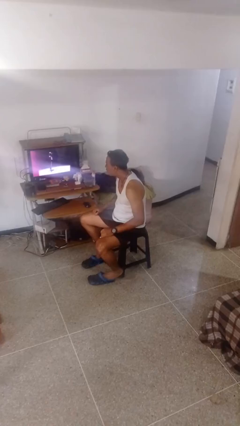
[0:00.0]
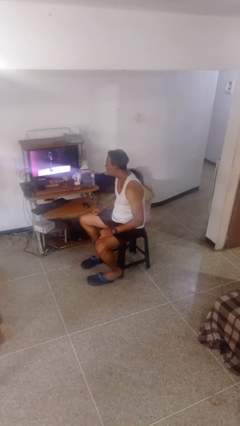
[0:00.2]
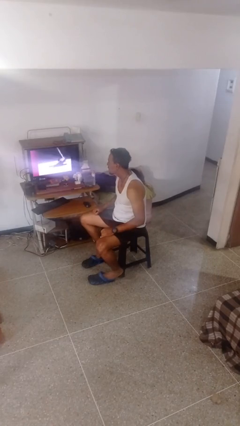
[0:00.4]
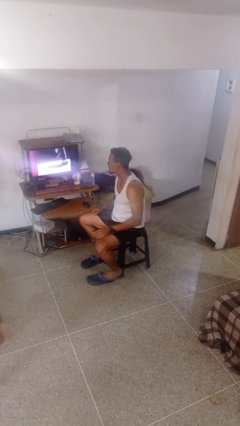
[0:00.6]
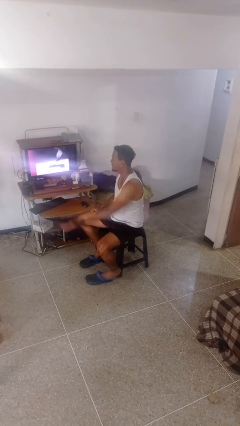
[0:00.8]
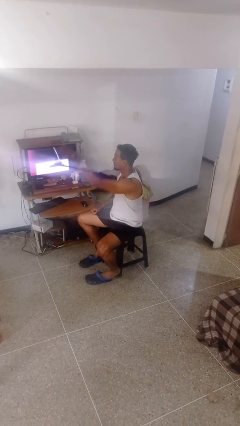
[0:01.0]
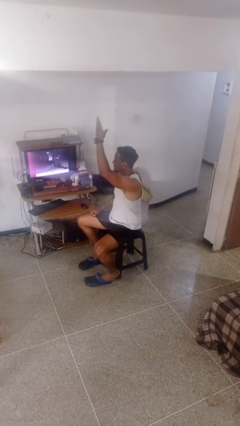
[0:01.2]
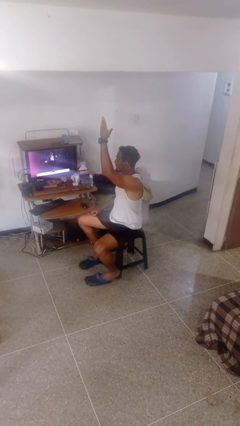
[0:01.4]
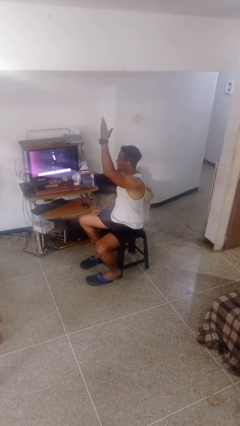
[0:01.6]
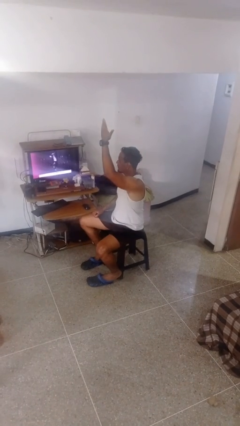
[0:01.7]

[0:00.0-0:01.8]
person gestures swipe up

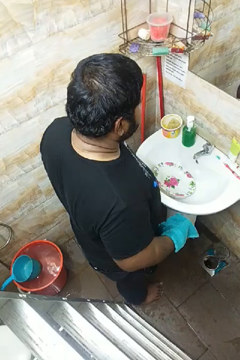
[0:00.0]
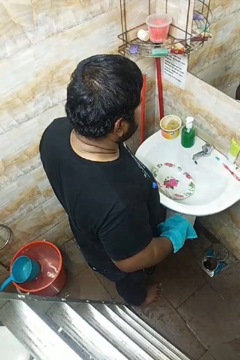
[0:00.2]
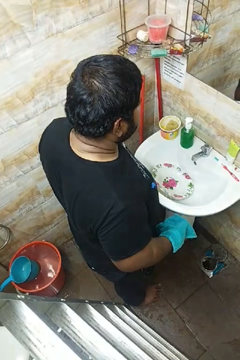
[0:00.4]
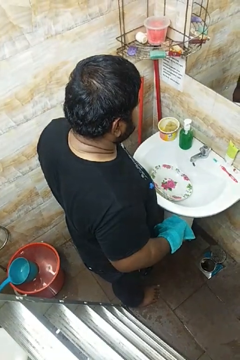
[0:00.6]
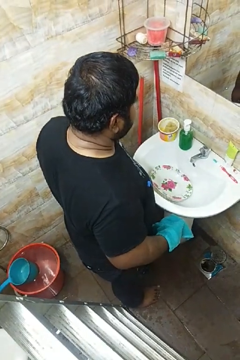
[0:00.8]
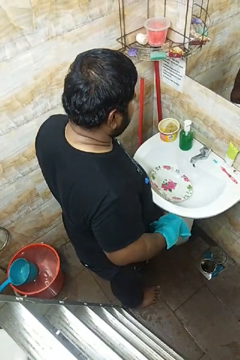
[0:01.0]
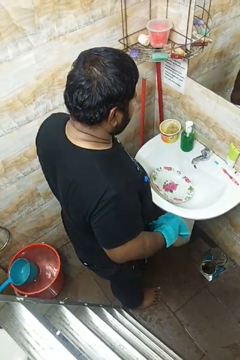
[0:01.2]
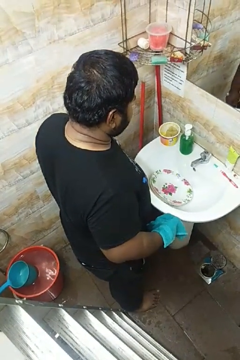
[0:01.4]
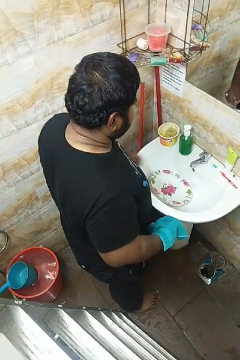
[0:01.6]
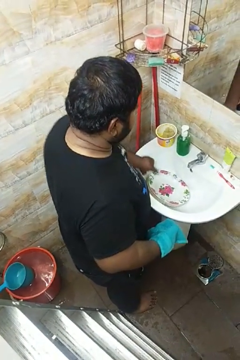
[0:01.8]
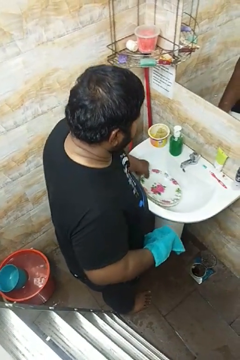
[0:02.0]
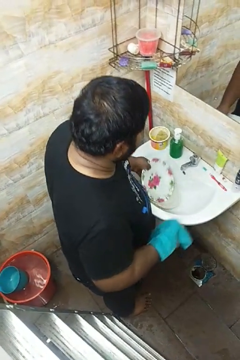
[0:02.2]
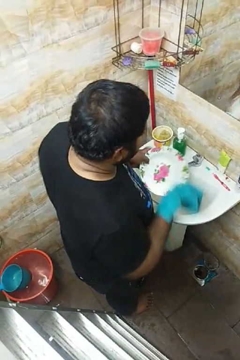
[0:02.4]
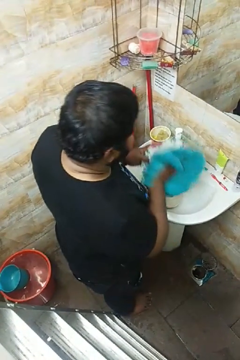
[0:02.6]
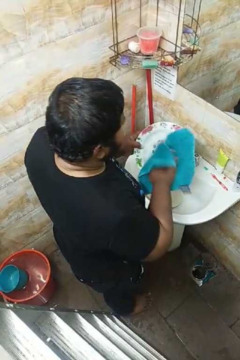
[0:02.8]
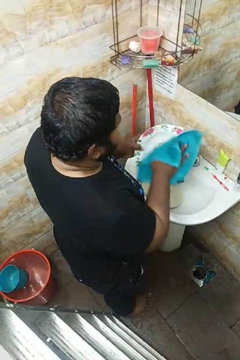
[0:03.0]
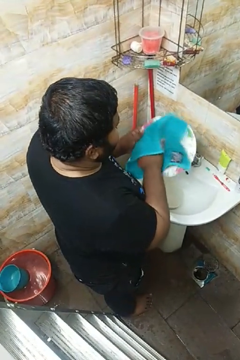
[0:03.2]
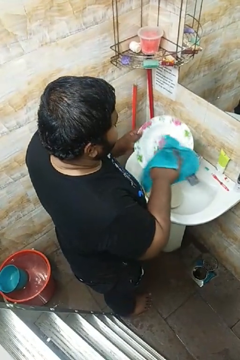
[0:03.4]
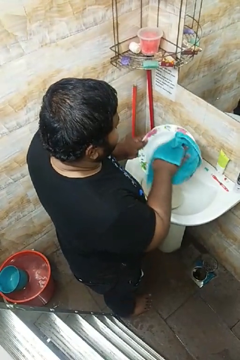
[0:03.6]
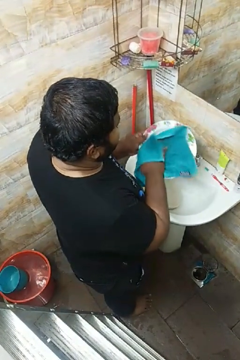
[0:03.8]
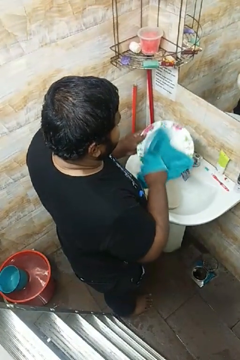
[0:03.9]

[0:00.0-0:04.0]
person dries dish

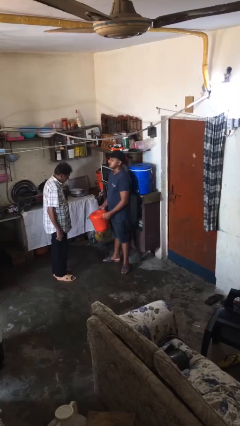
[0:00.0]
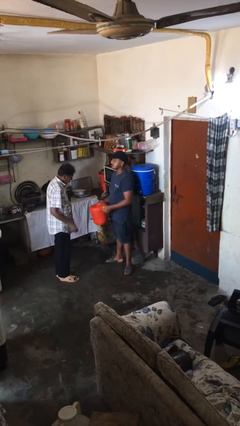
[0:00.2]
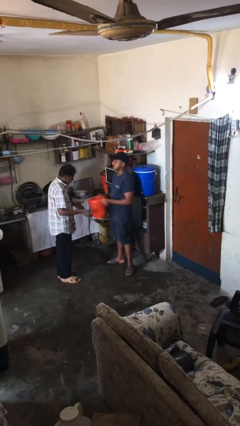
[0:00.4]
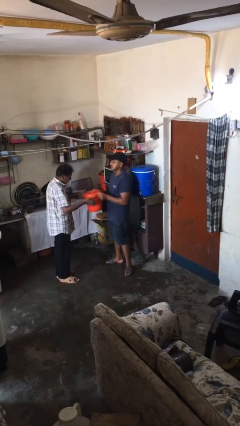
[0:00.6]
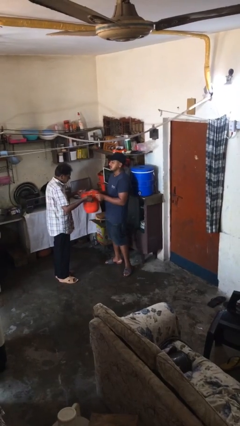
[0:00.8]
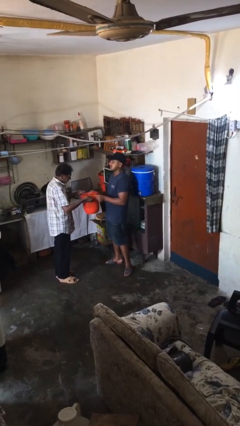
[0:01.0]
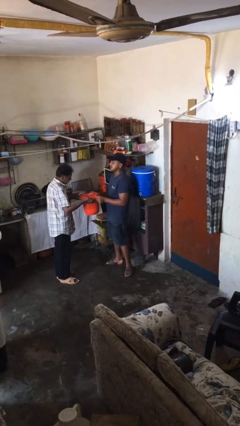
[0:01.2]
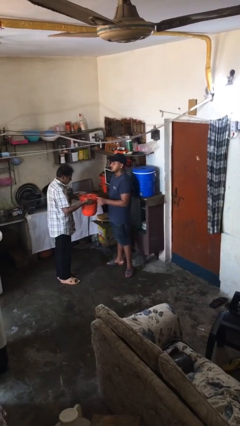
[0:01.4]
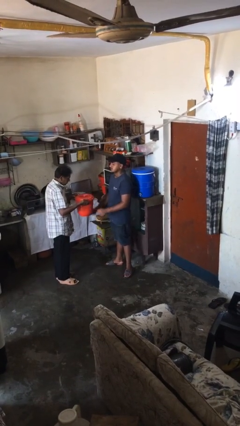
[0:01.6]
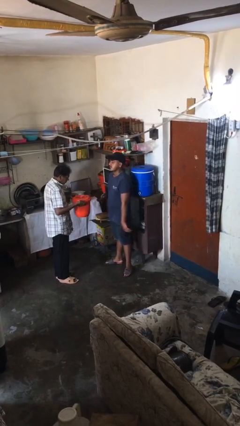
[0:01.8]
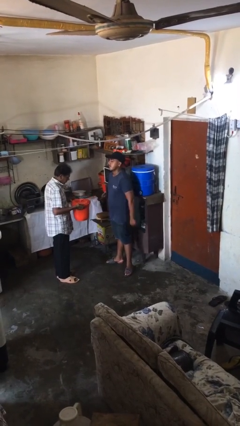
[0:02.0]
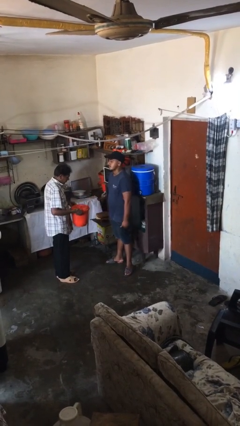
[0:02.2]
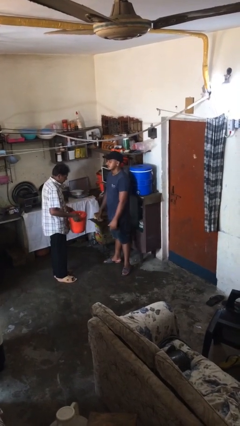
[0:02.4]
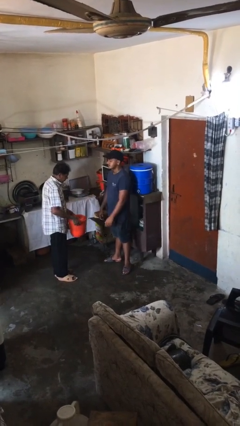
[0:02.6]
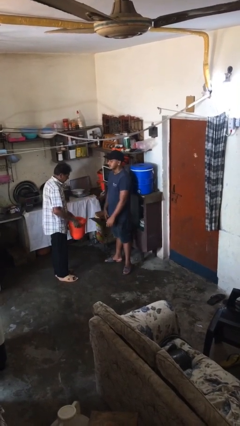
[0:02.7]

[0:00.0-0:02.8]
person transfers object to person

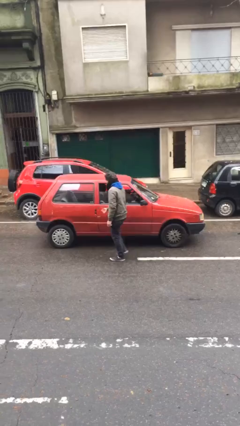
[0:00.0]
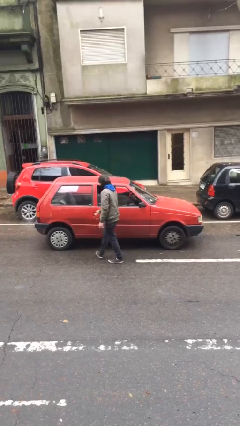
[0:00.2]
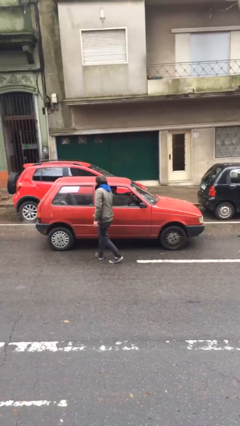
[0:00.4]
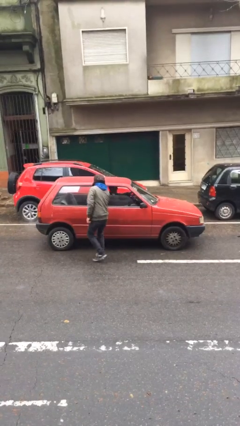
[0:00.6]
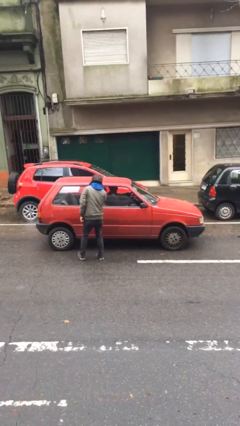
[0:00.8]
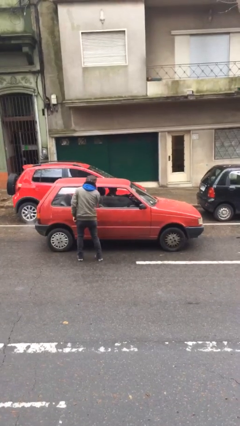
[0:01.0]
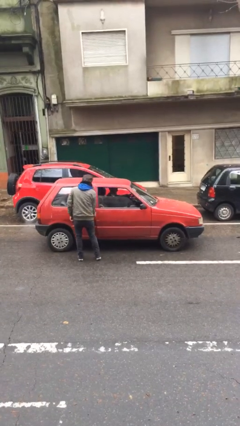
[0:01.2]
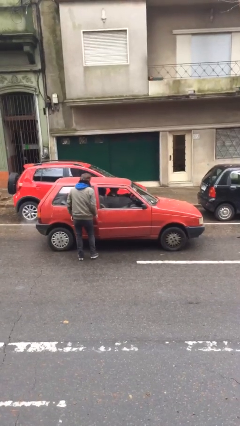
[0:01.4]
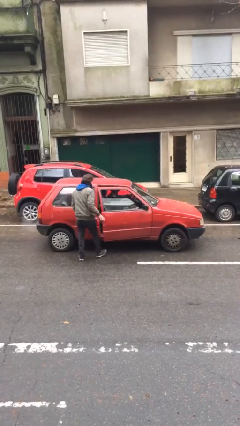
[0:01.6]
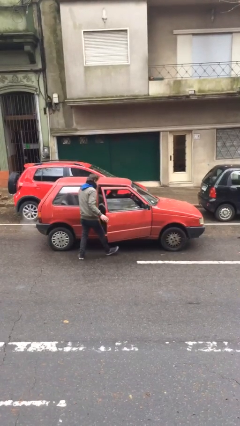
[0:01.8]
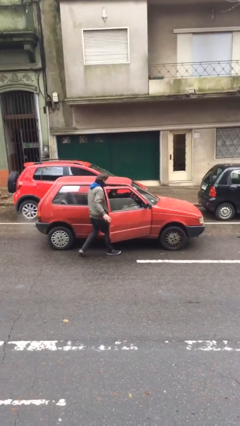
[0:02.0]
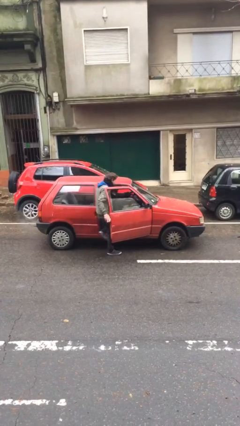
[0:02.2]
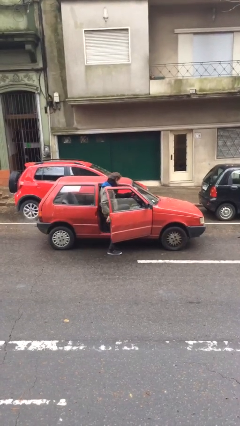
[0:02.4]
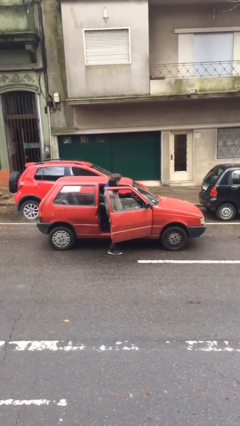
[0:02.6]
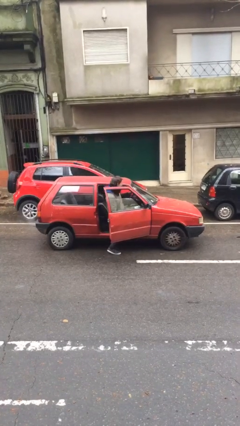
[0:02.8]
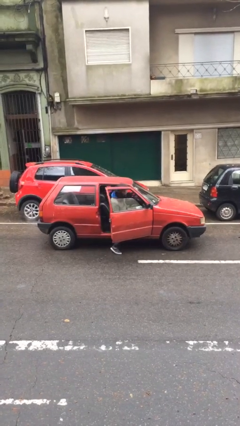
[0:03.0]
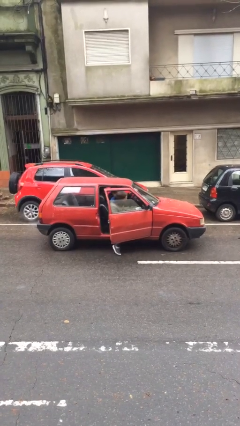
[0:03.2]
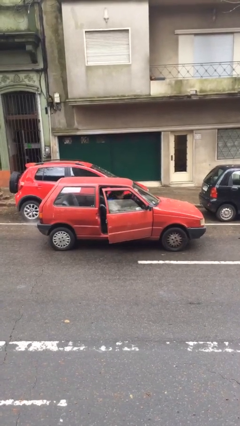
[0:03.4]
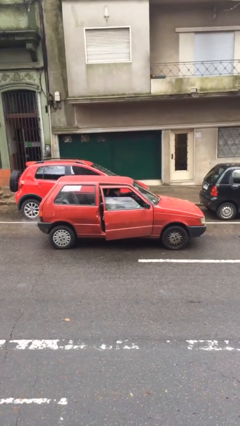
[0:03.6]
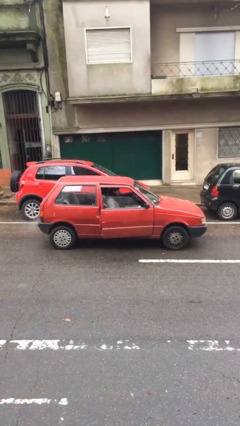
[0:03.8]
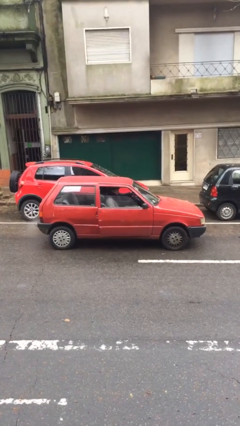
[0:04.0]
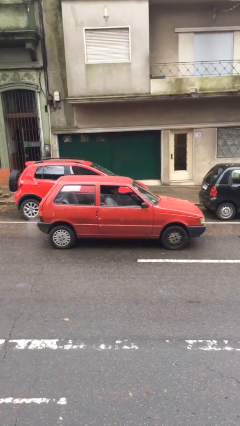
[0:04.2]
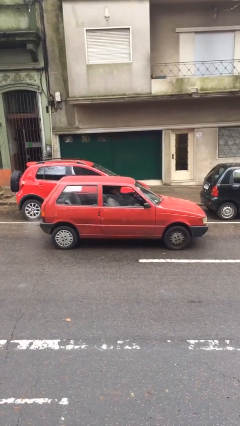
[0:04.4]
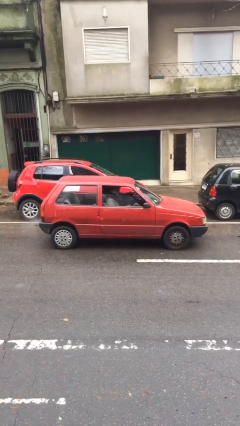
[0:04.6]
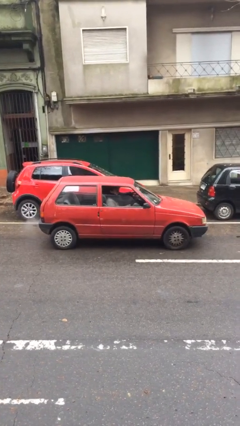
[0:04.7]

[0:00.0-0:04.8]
car picks up person

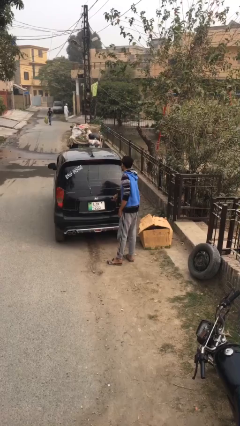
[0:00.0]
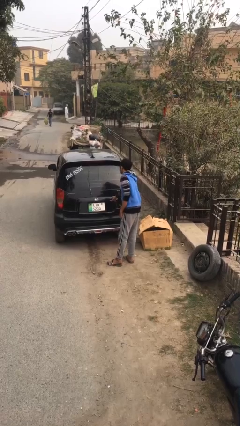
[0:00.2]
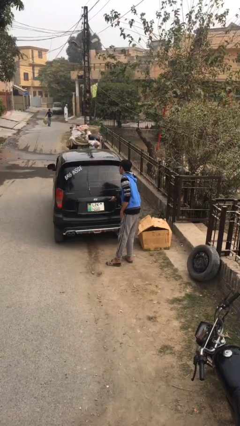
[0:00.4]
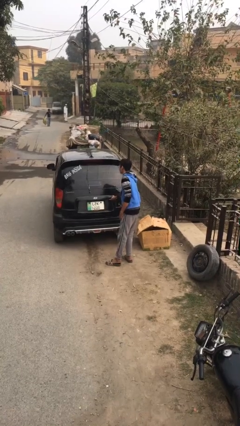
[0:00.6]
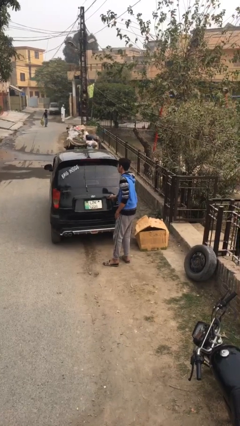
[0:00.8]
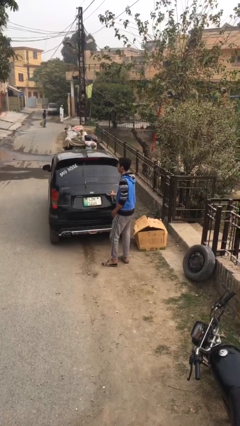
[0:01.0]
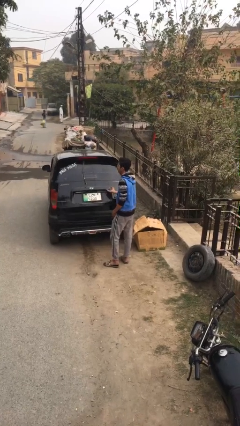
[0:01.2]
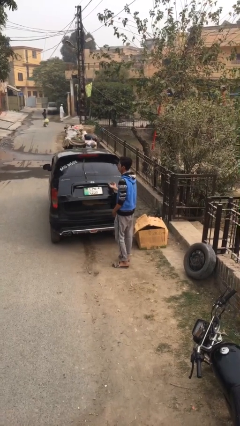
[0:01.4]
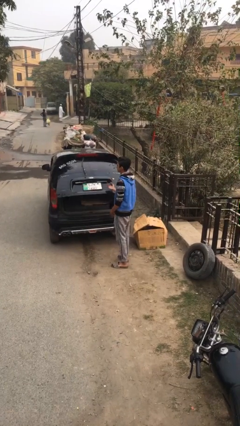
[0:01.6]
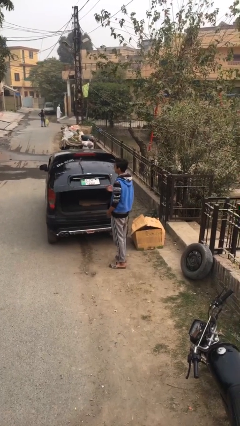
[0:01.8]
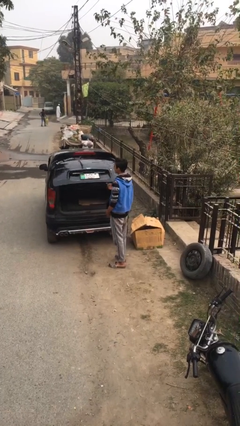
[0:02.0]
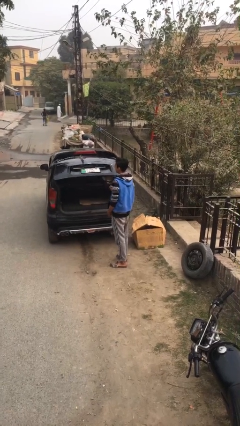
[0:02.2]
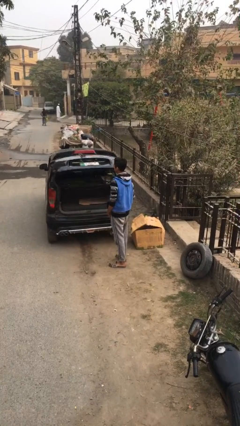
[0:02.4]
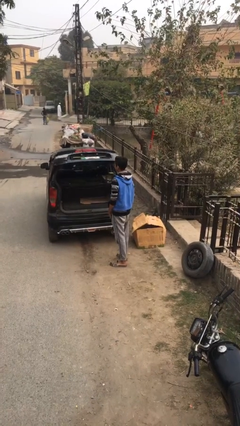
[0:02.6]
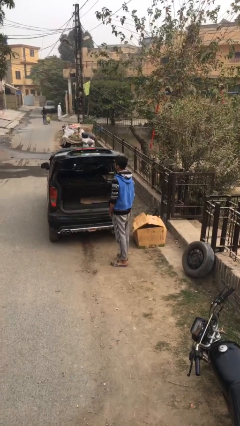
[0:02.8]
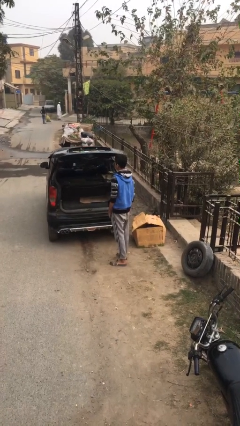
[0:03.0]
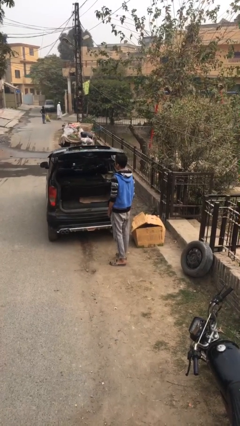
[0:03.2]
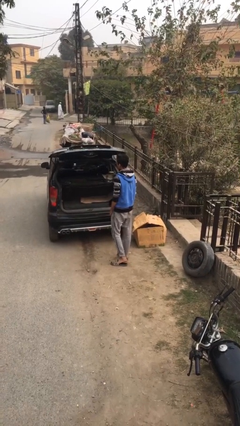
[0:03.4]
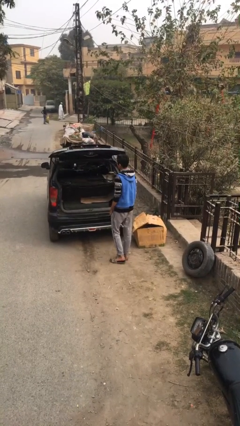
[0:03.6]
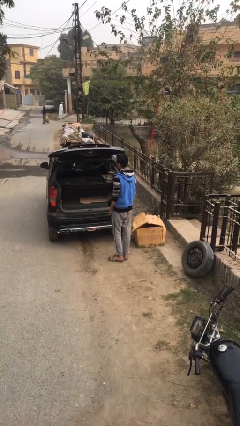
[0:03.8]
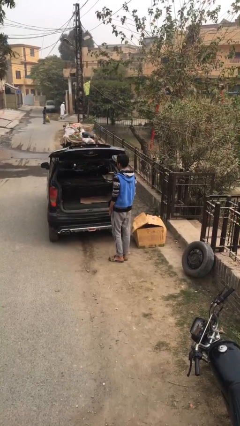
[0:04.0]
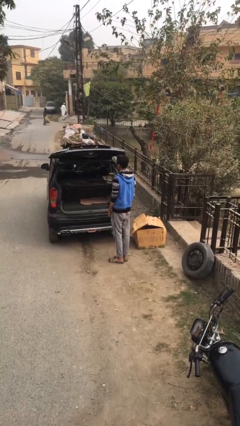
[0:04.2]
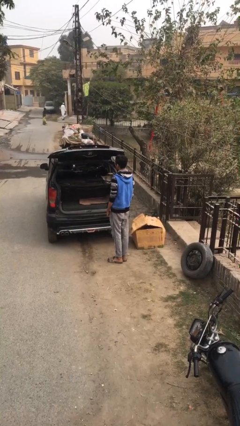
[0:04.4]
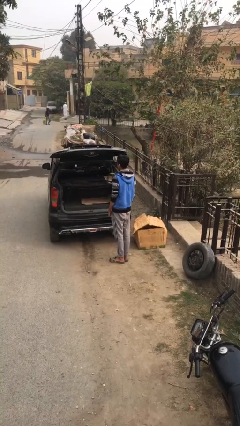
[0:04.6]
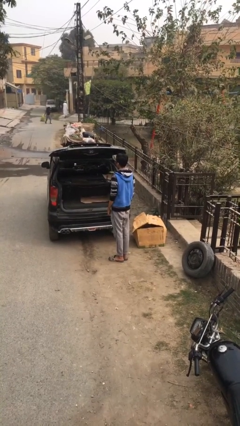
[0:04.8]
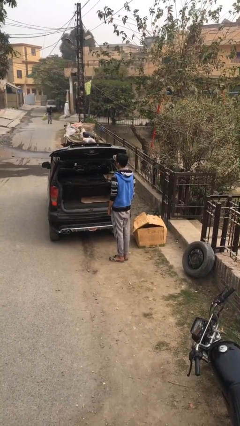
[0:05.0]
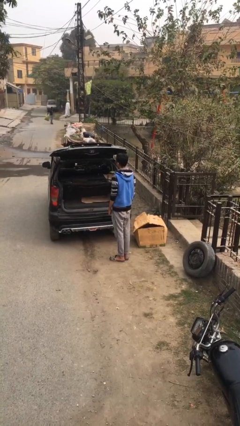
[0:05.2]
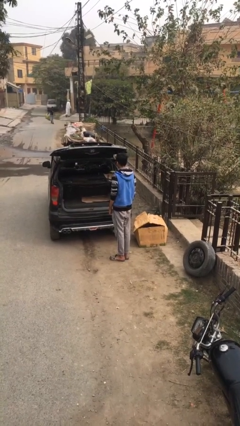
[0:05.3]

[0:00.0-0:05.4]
person opens car trunk
